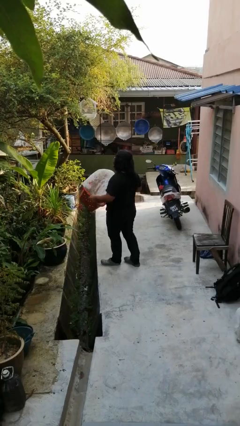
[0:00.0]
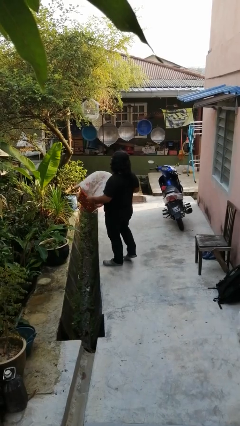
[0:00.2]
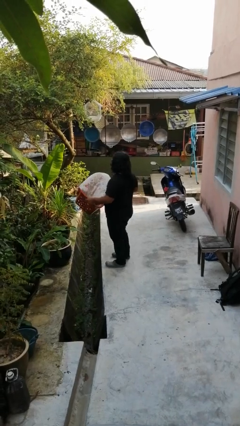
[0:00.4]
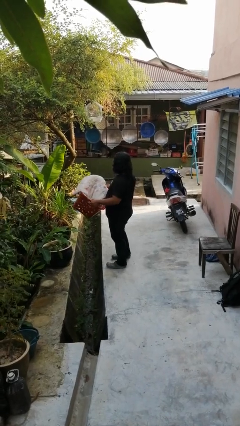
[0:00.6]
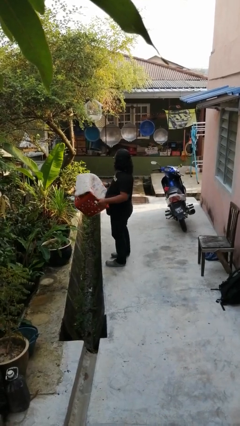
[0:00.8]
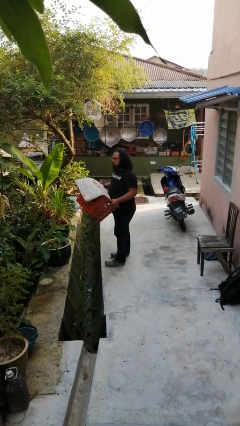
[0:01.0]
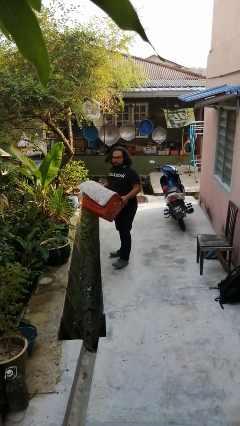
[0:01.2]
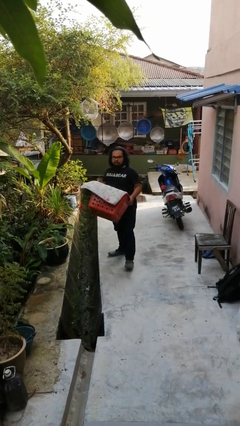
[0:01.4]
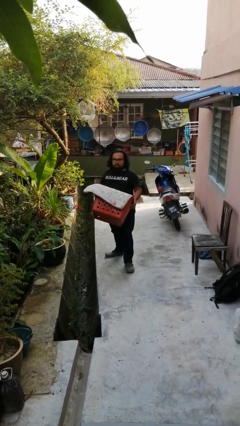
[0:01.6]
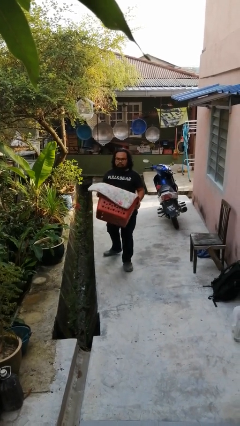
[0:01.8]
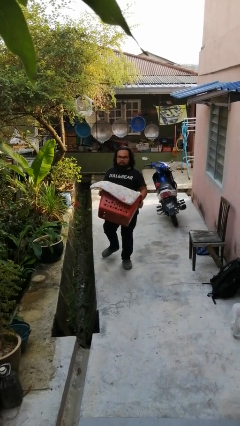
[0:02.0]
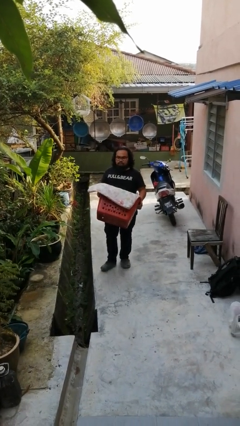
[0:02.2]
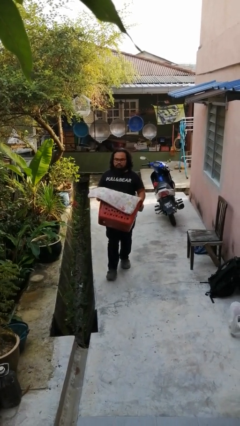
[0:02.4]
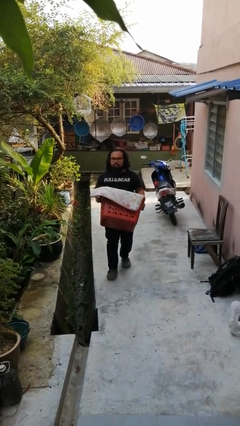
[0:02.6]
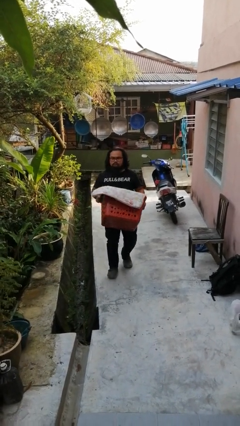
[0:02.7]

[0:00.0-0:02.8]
person carries laundry basket

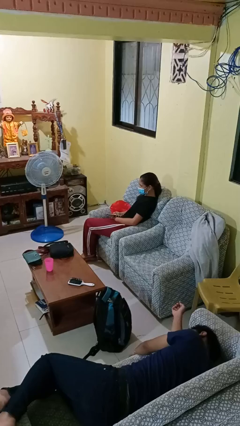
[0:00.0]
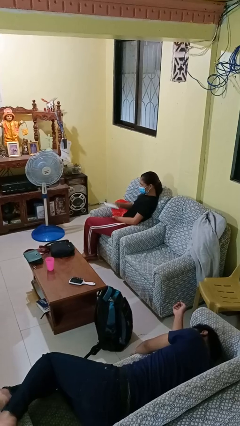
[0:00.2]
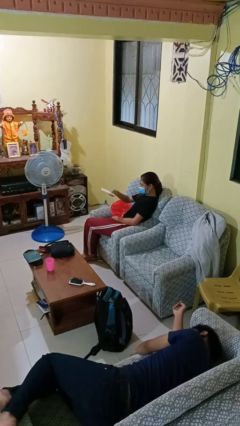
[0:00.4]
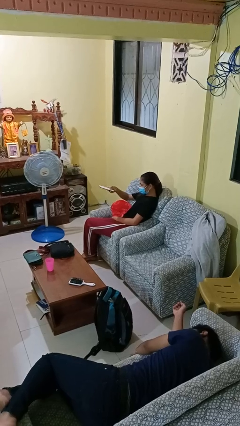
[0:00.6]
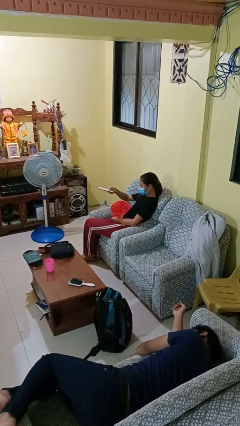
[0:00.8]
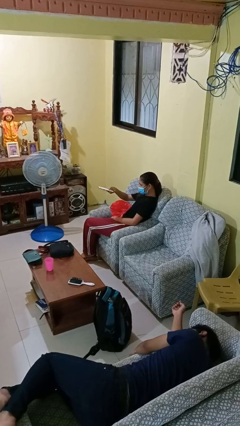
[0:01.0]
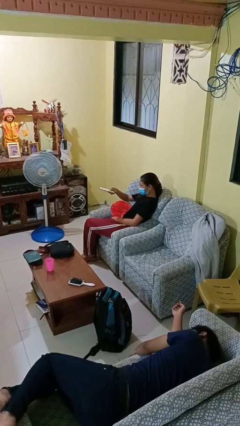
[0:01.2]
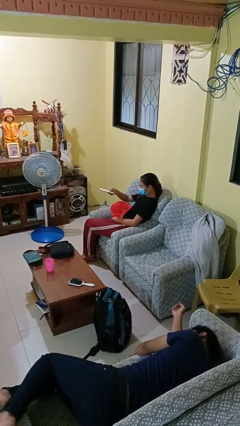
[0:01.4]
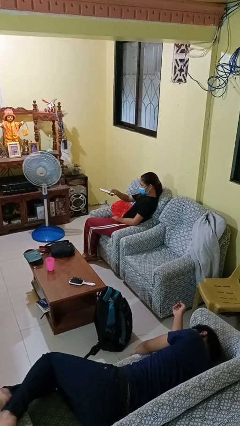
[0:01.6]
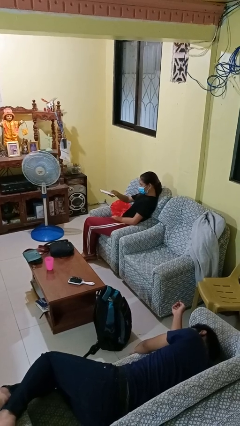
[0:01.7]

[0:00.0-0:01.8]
person uses television remote

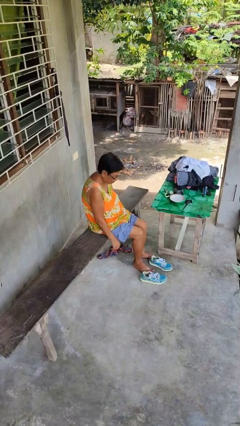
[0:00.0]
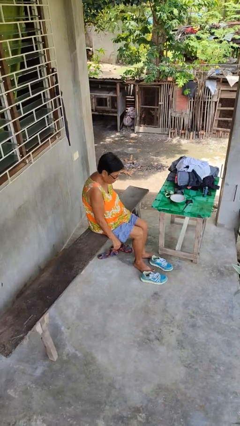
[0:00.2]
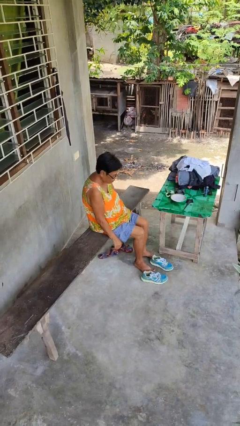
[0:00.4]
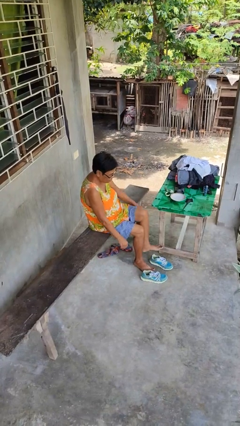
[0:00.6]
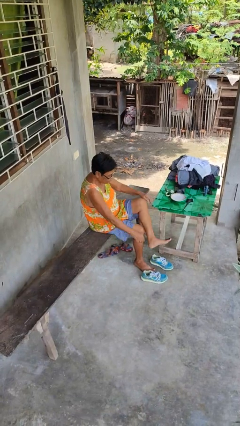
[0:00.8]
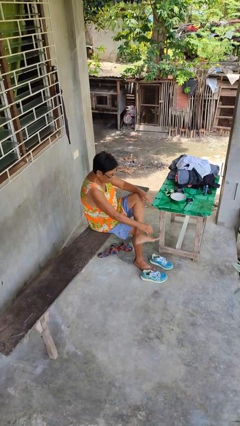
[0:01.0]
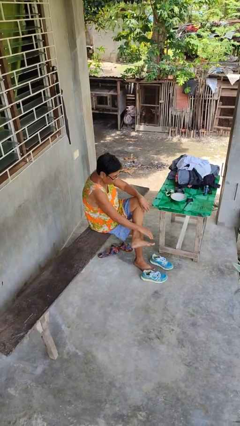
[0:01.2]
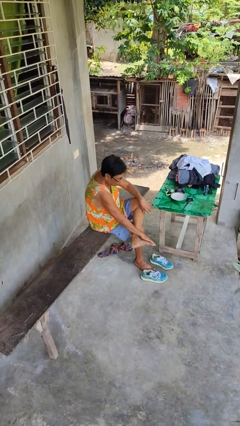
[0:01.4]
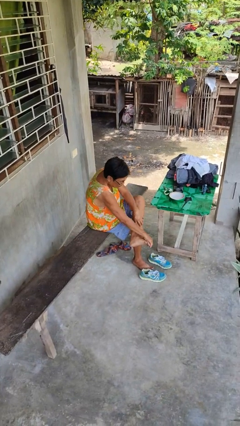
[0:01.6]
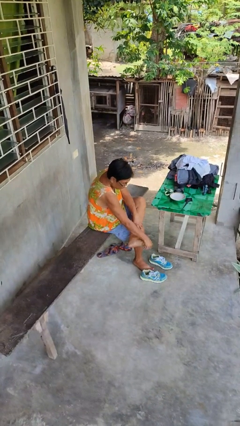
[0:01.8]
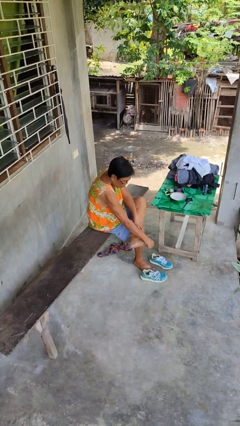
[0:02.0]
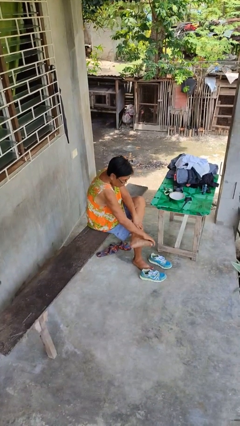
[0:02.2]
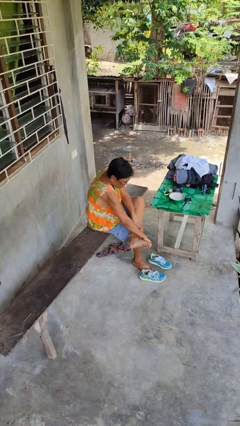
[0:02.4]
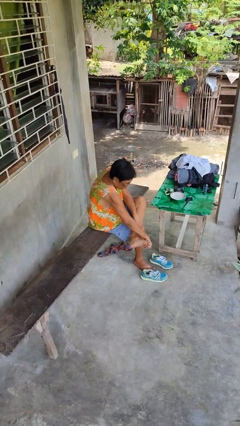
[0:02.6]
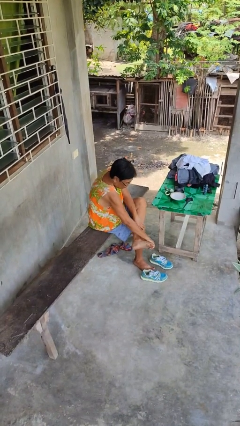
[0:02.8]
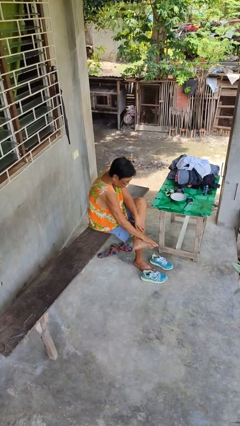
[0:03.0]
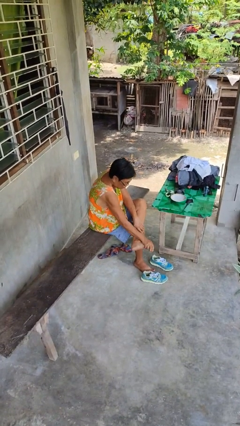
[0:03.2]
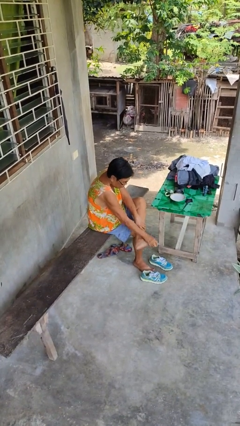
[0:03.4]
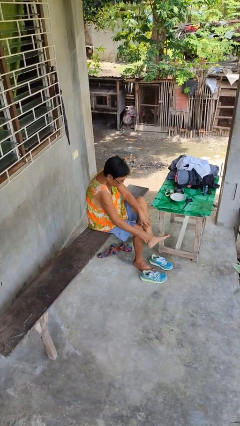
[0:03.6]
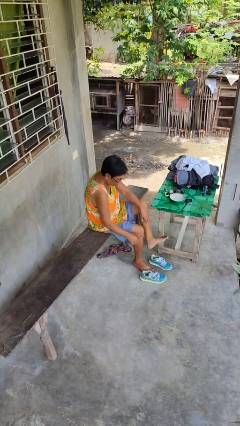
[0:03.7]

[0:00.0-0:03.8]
person rubs foot

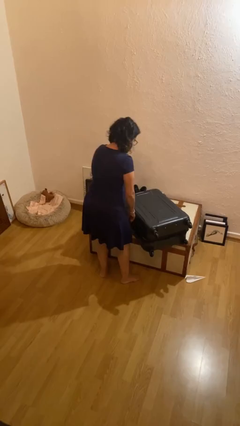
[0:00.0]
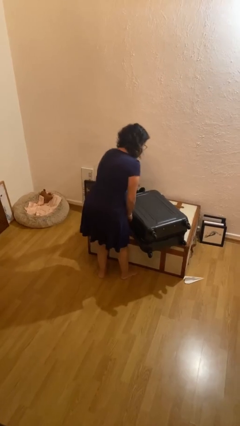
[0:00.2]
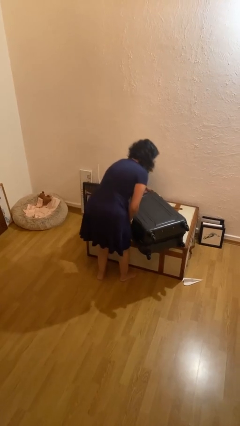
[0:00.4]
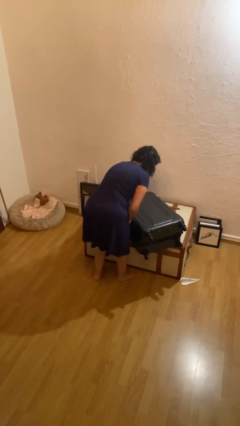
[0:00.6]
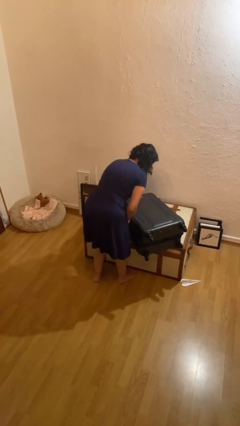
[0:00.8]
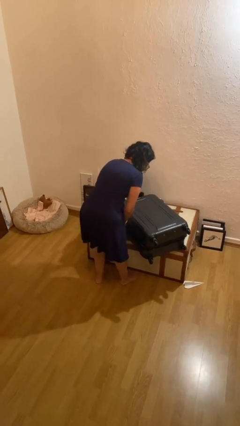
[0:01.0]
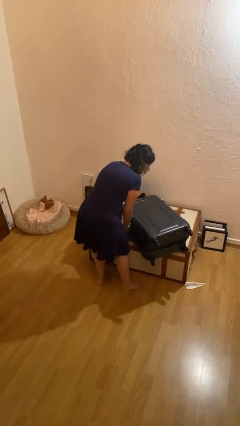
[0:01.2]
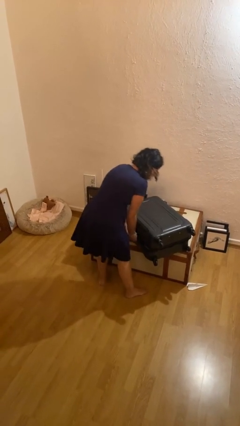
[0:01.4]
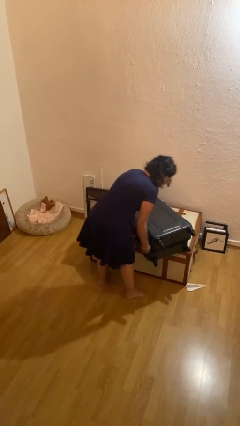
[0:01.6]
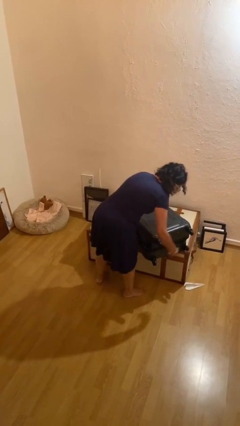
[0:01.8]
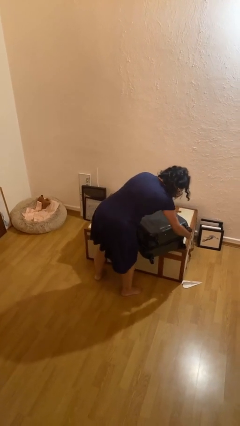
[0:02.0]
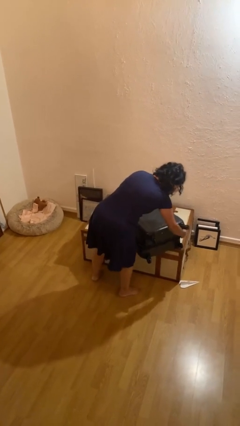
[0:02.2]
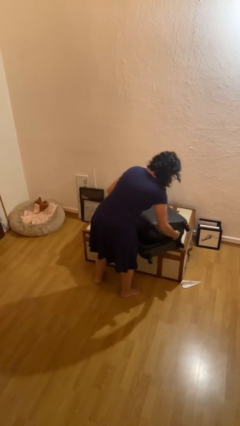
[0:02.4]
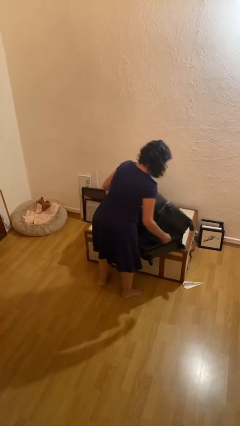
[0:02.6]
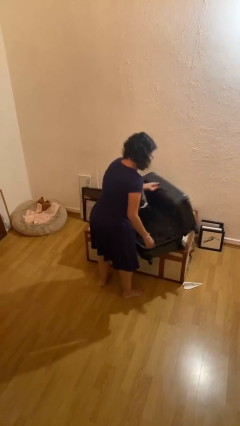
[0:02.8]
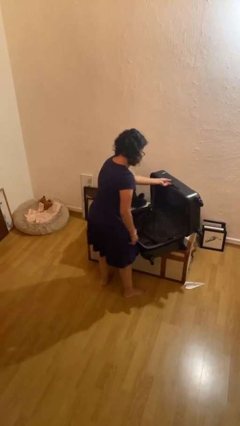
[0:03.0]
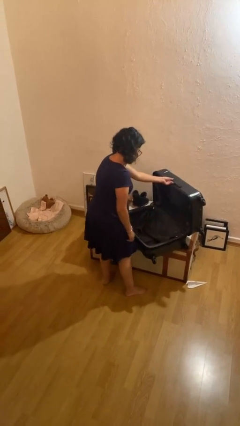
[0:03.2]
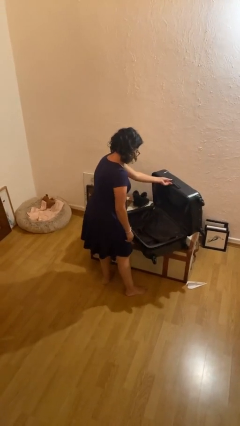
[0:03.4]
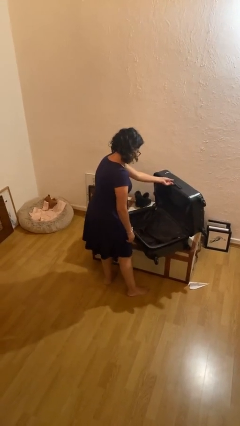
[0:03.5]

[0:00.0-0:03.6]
person opens suitcase

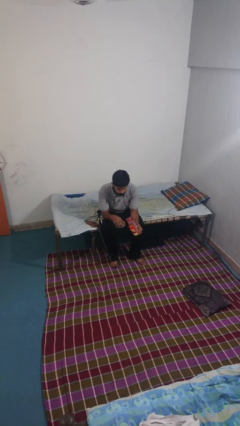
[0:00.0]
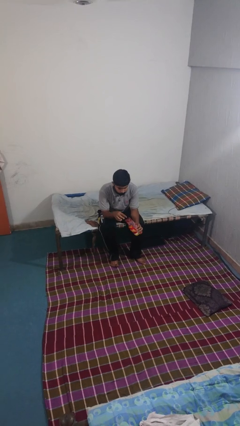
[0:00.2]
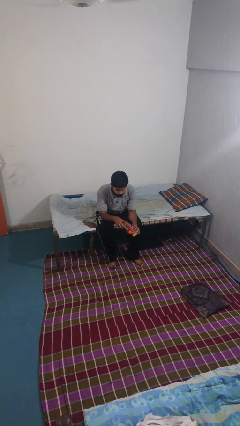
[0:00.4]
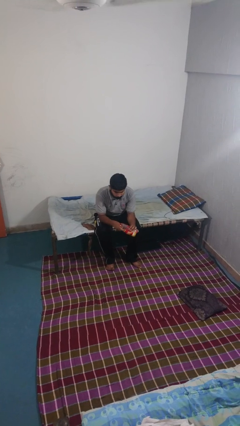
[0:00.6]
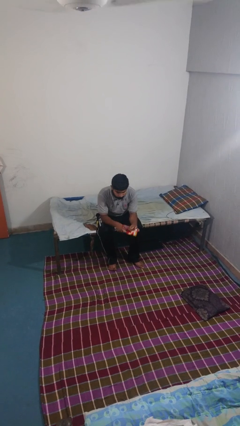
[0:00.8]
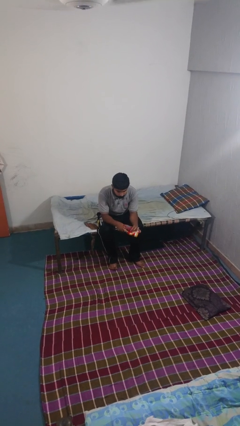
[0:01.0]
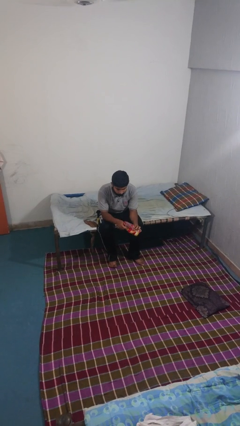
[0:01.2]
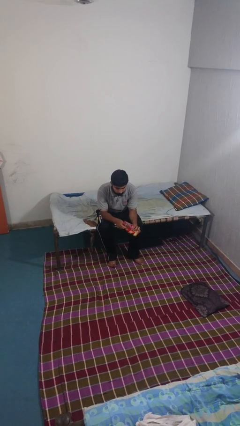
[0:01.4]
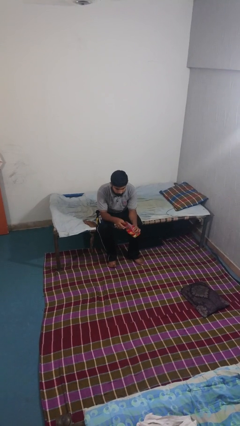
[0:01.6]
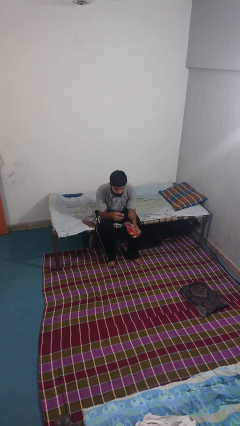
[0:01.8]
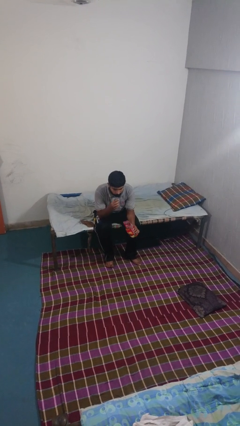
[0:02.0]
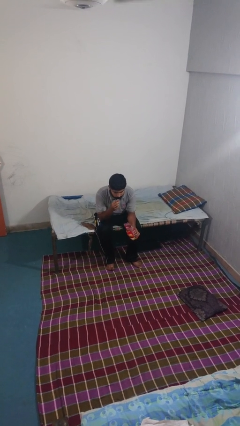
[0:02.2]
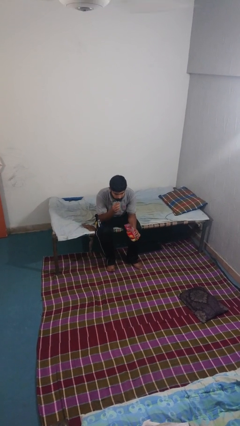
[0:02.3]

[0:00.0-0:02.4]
person eats snack from bag

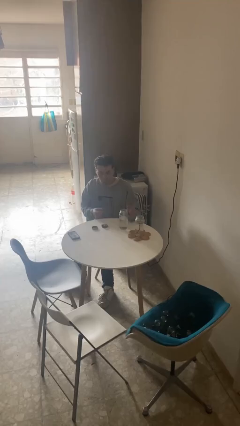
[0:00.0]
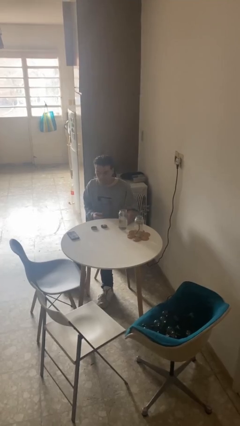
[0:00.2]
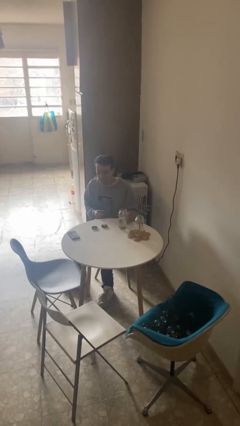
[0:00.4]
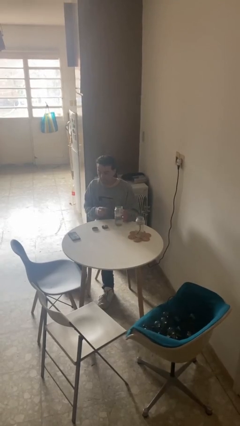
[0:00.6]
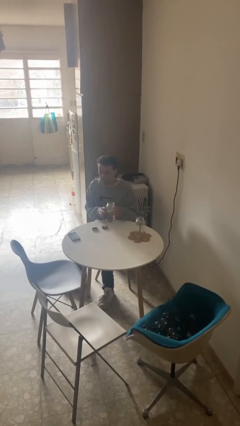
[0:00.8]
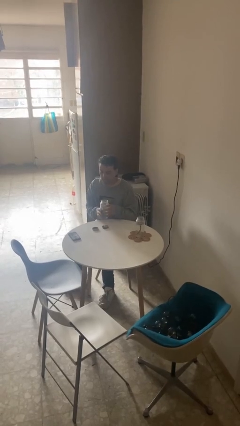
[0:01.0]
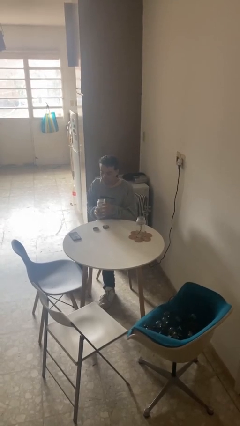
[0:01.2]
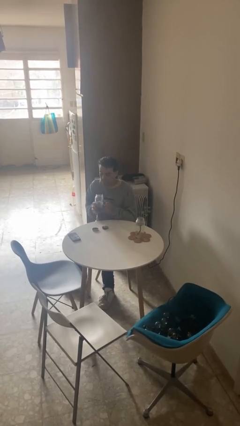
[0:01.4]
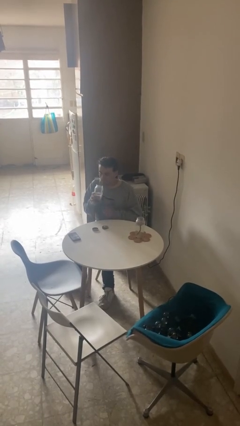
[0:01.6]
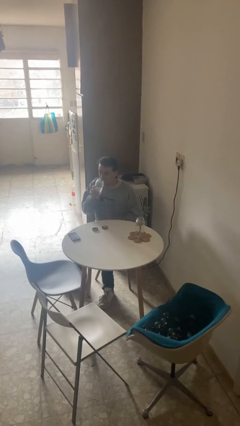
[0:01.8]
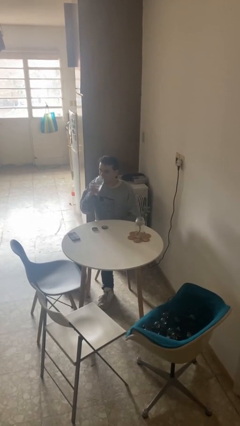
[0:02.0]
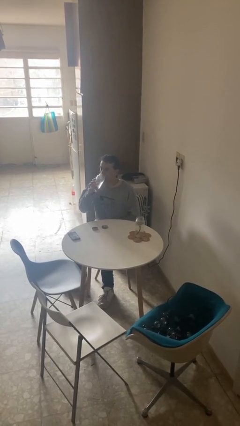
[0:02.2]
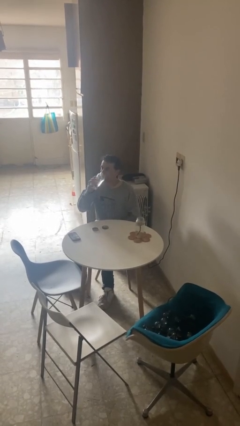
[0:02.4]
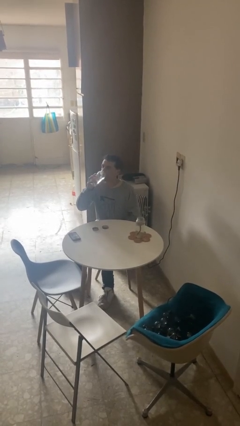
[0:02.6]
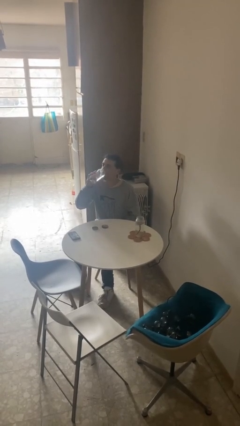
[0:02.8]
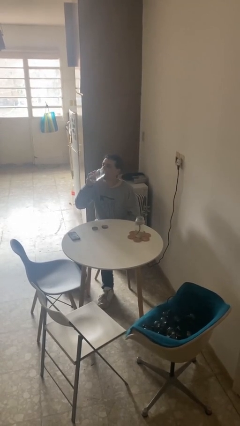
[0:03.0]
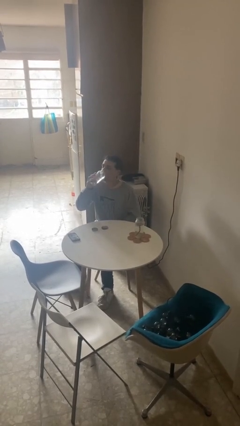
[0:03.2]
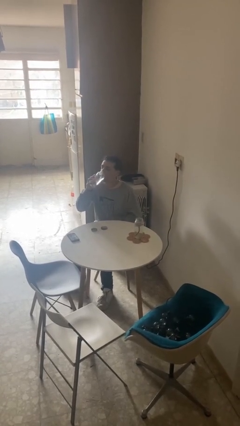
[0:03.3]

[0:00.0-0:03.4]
person drinks from cup
